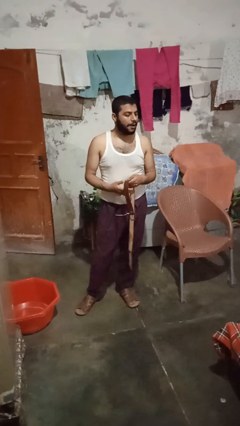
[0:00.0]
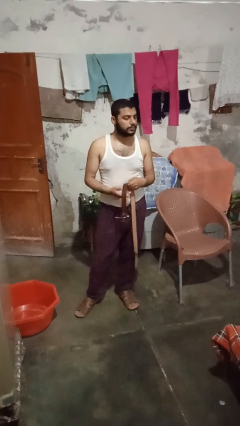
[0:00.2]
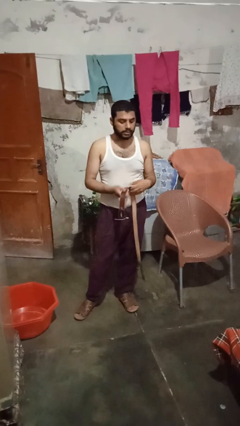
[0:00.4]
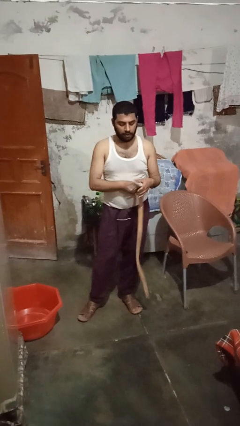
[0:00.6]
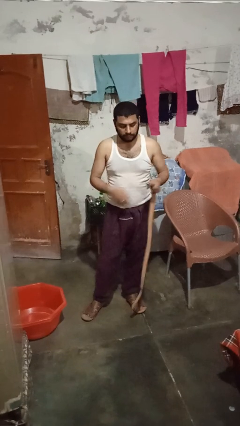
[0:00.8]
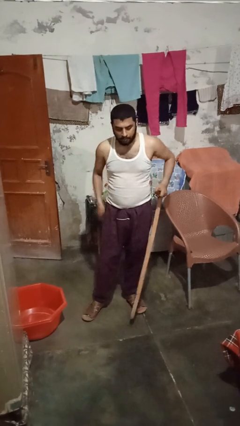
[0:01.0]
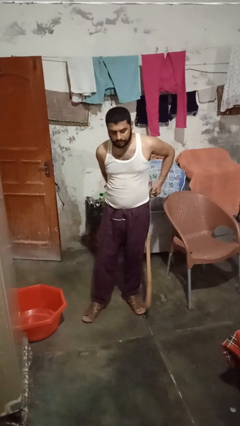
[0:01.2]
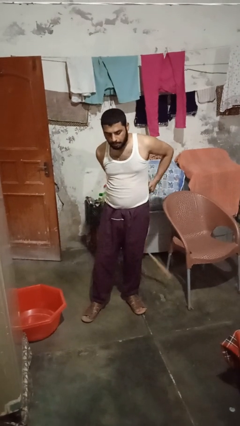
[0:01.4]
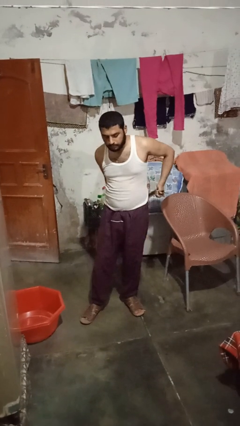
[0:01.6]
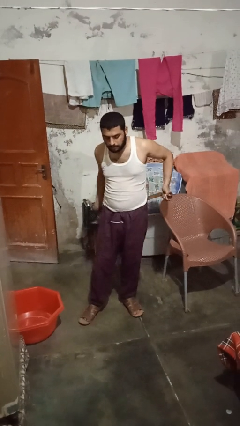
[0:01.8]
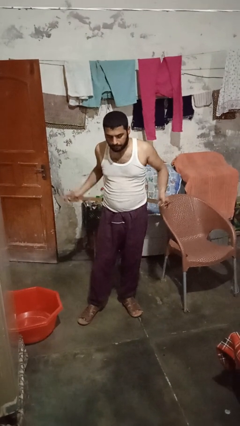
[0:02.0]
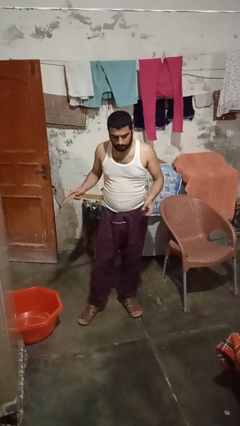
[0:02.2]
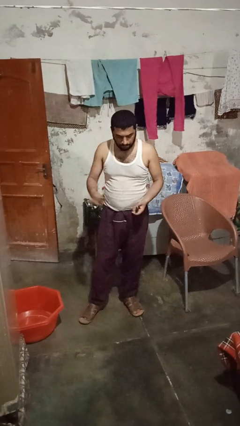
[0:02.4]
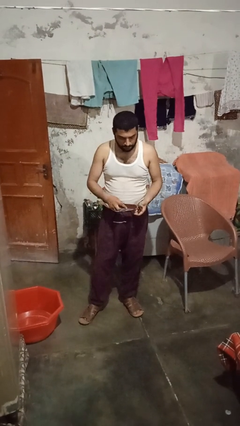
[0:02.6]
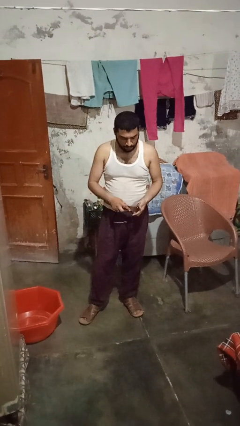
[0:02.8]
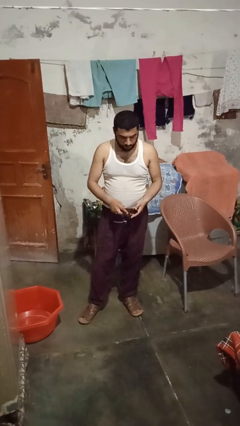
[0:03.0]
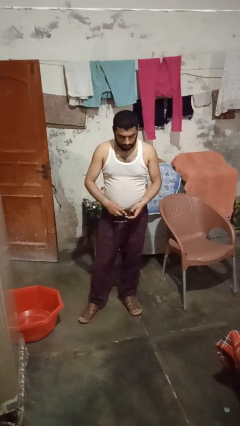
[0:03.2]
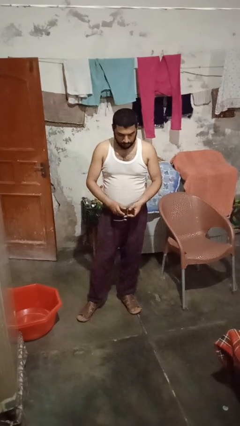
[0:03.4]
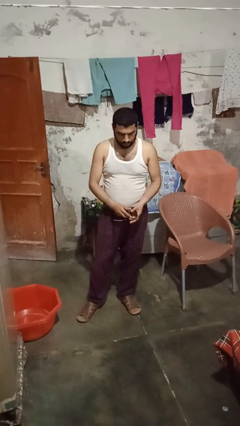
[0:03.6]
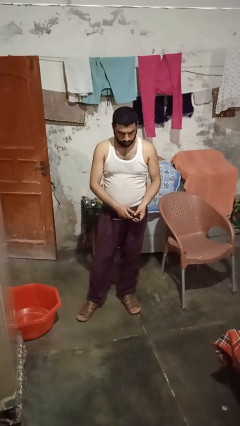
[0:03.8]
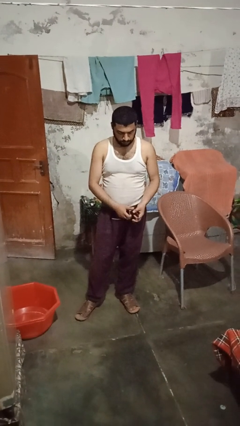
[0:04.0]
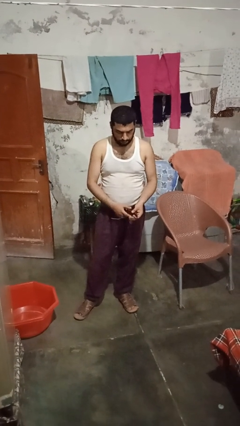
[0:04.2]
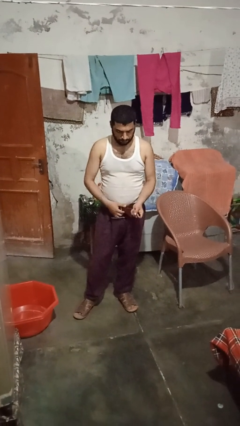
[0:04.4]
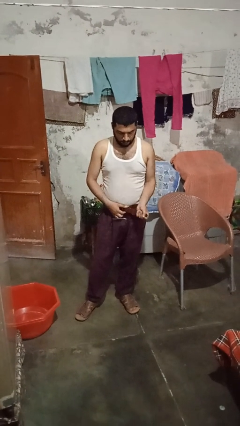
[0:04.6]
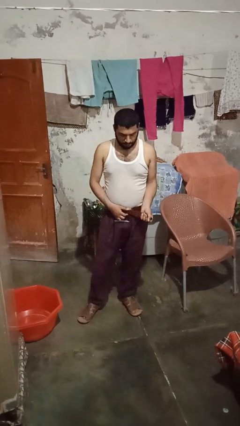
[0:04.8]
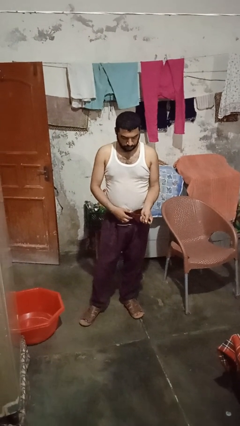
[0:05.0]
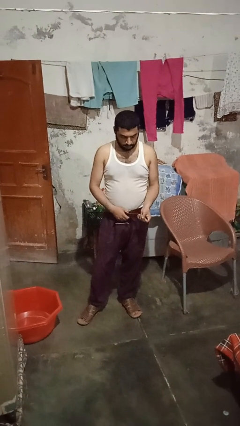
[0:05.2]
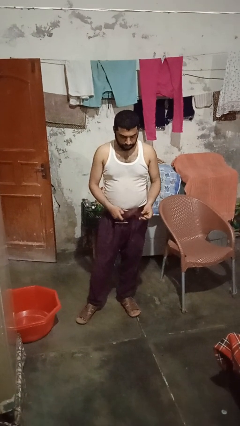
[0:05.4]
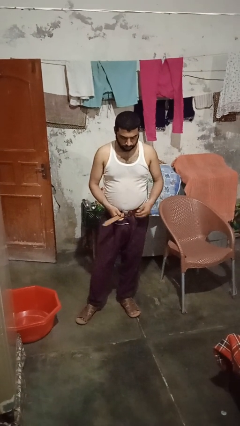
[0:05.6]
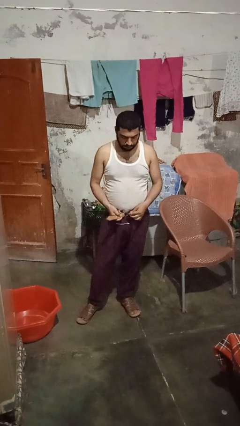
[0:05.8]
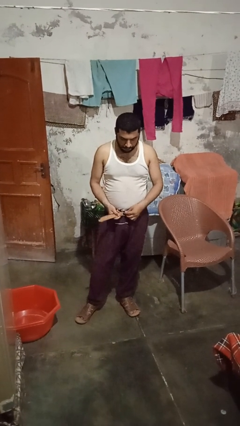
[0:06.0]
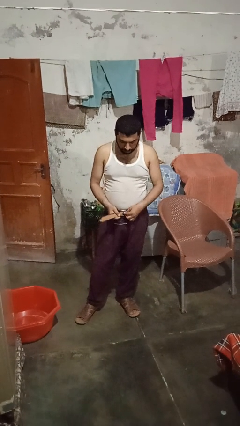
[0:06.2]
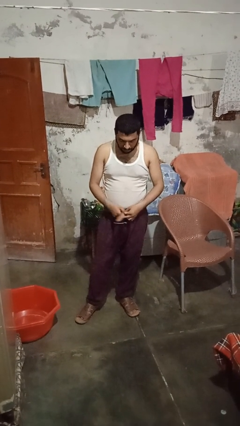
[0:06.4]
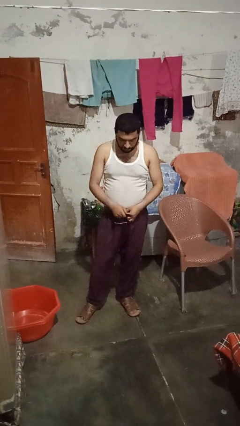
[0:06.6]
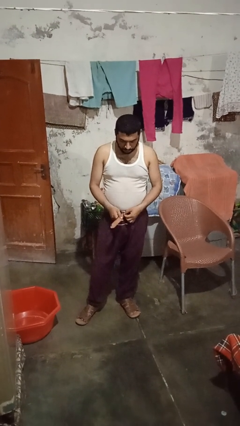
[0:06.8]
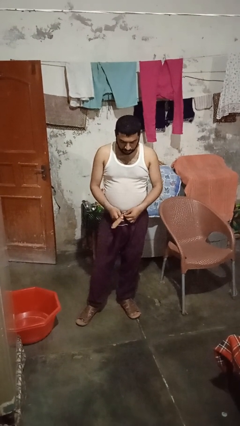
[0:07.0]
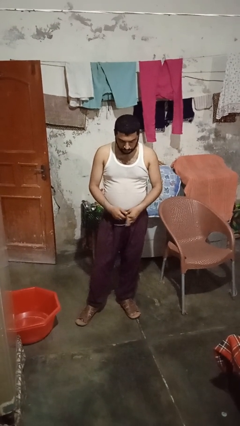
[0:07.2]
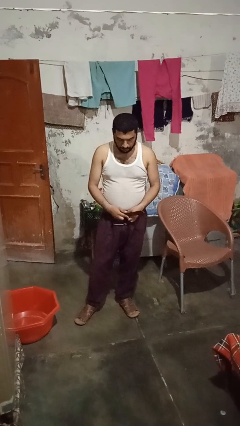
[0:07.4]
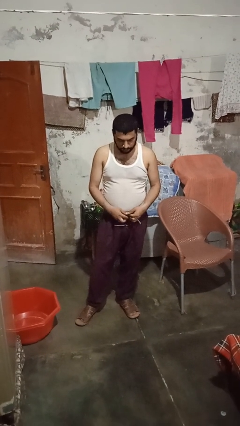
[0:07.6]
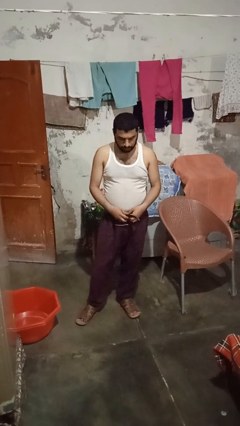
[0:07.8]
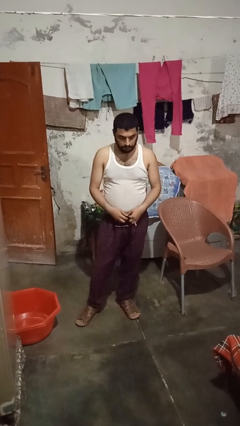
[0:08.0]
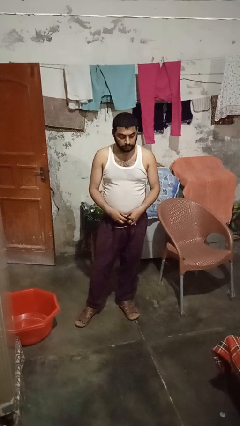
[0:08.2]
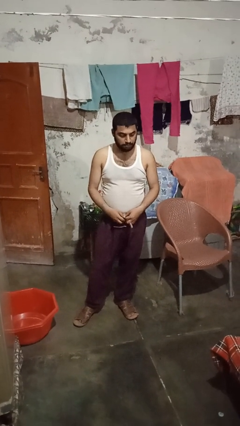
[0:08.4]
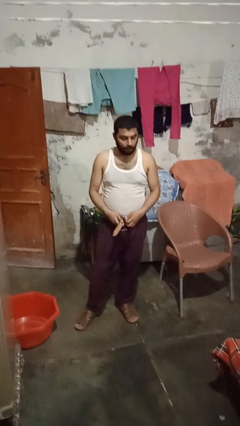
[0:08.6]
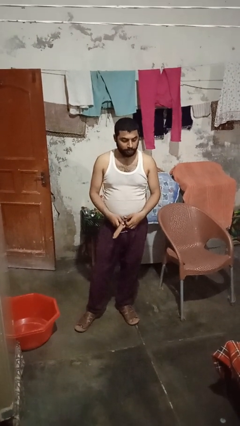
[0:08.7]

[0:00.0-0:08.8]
person puts on belt

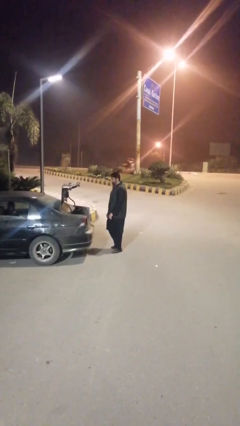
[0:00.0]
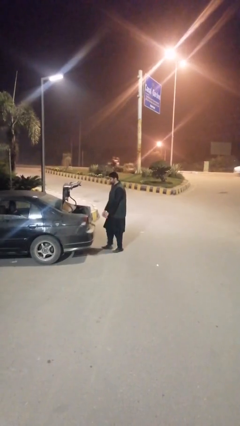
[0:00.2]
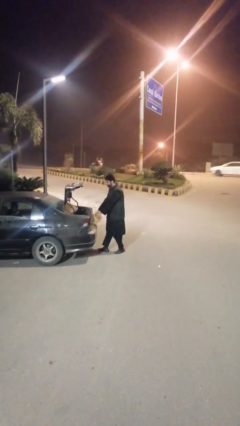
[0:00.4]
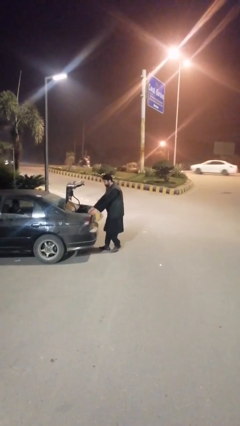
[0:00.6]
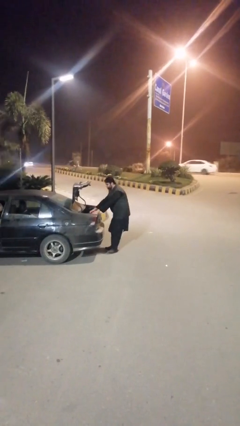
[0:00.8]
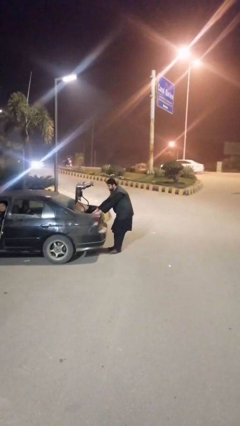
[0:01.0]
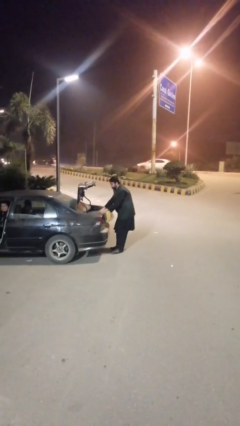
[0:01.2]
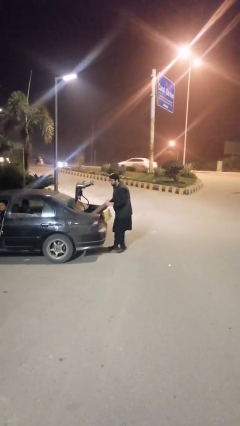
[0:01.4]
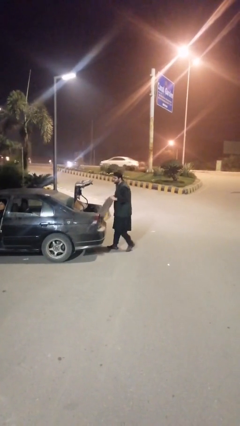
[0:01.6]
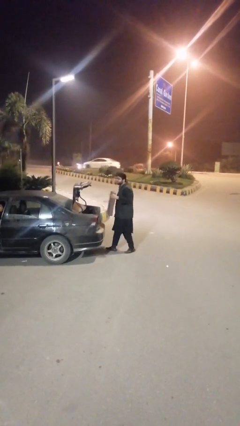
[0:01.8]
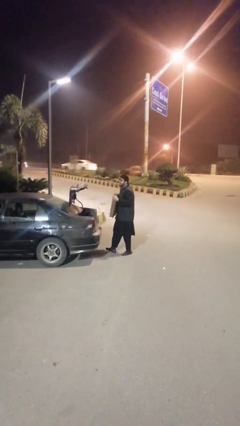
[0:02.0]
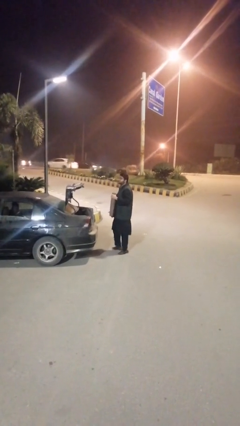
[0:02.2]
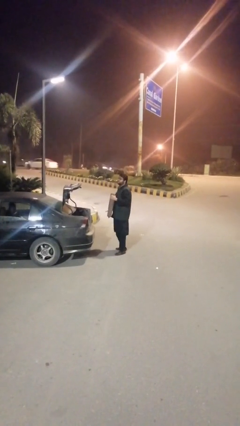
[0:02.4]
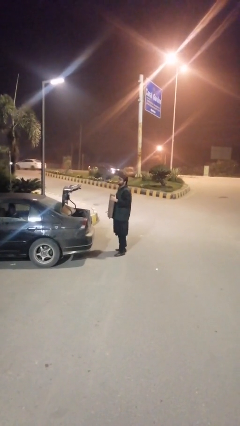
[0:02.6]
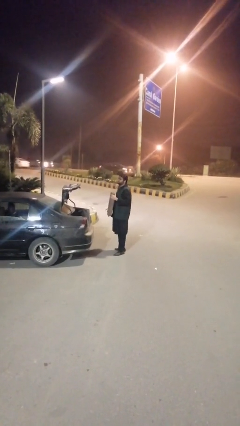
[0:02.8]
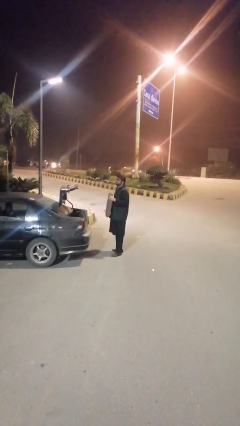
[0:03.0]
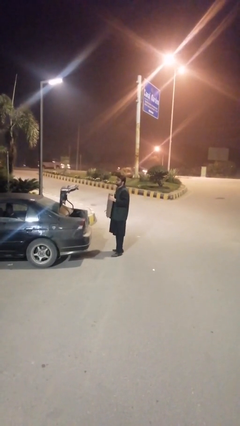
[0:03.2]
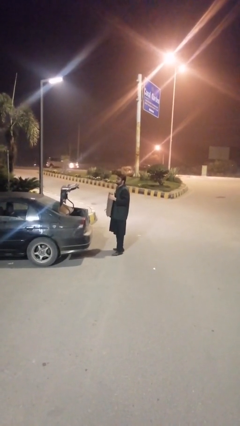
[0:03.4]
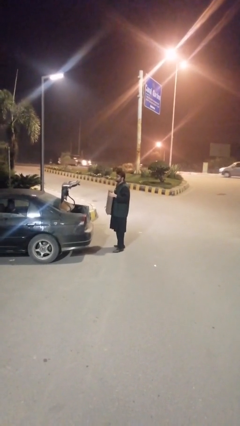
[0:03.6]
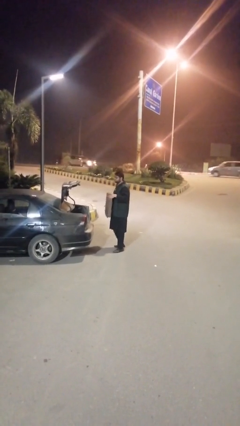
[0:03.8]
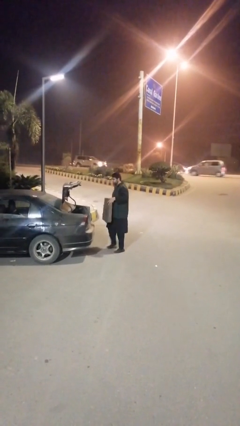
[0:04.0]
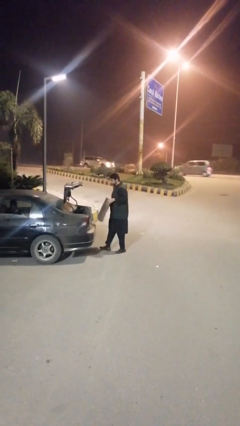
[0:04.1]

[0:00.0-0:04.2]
person unloads car

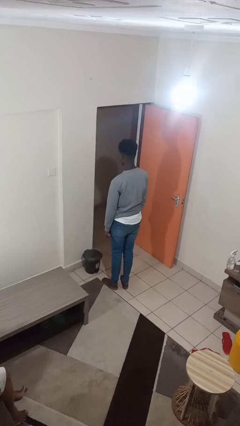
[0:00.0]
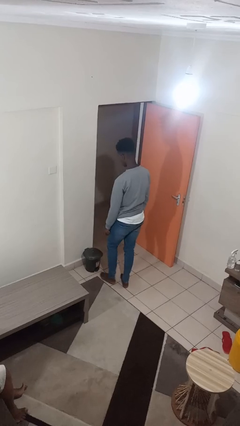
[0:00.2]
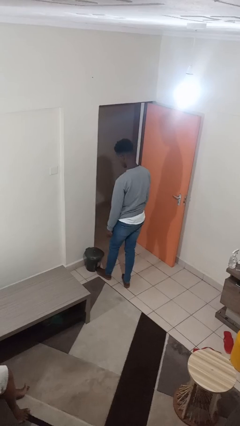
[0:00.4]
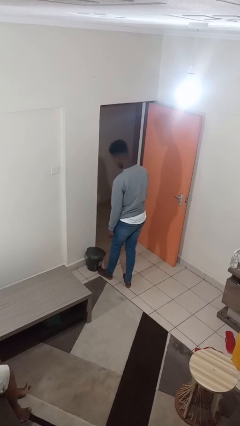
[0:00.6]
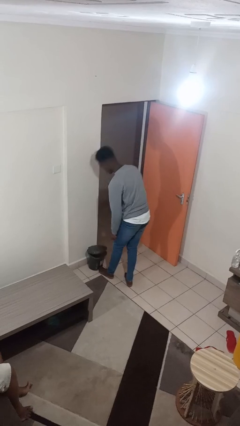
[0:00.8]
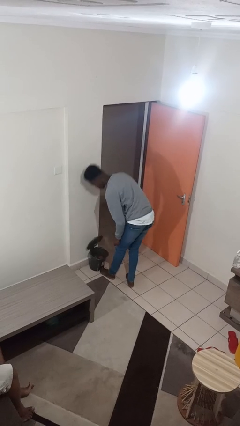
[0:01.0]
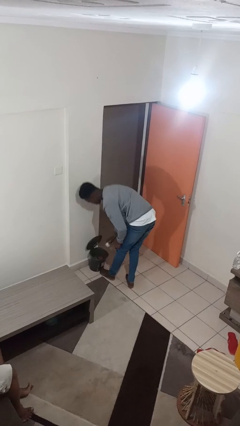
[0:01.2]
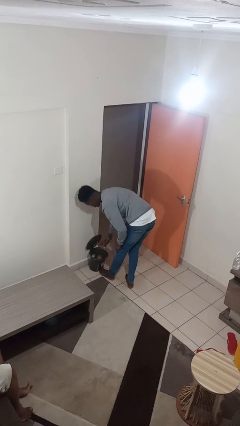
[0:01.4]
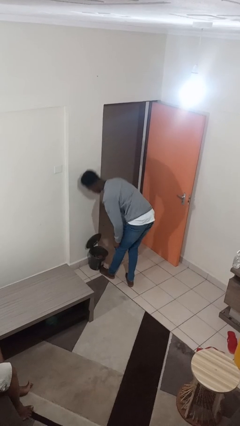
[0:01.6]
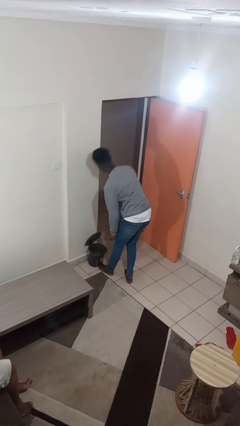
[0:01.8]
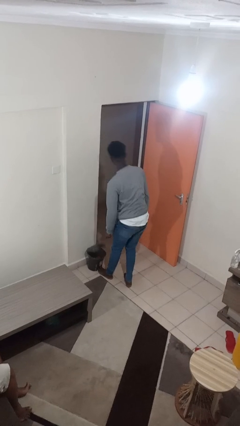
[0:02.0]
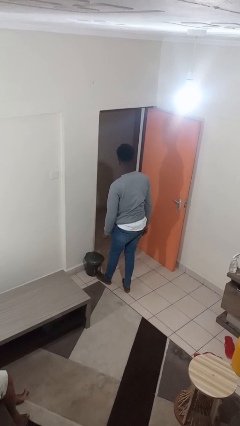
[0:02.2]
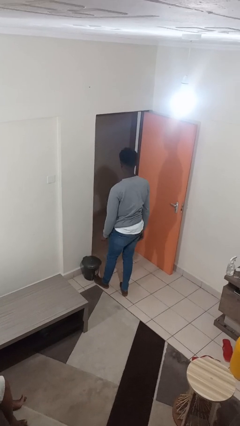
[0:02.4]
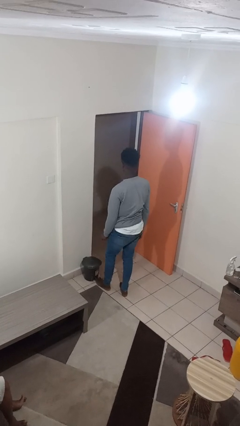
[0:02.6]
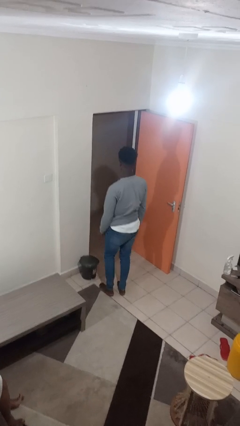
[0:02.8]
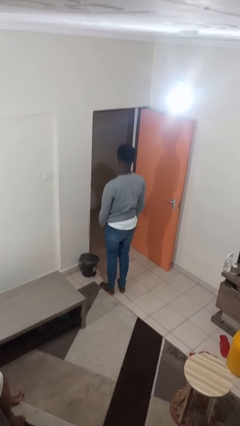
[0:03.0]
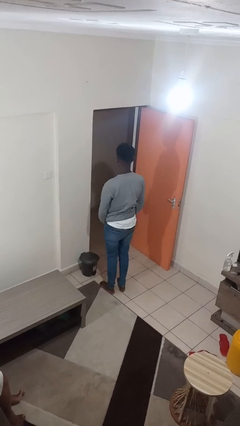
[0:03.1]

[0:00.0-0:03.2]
person discards trash

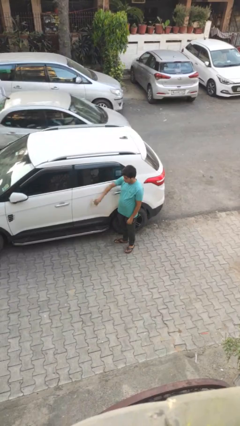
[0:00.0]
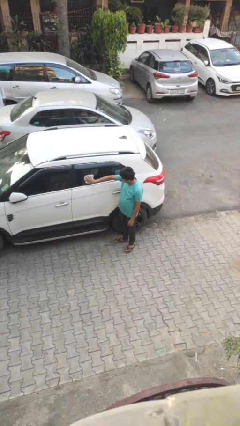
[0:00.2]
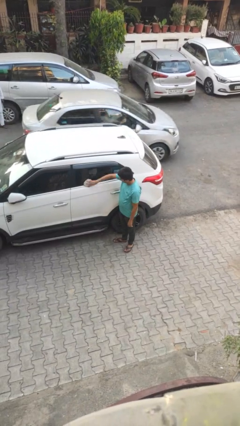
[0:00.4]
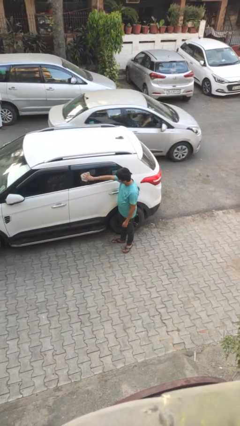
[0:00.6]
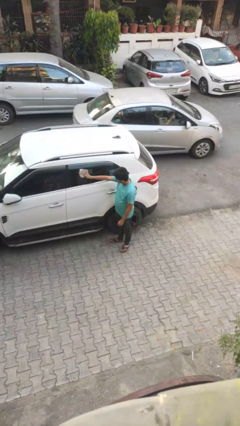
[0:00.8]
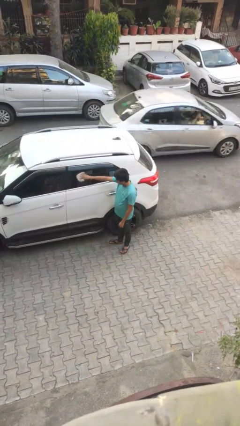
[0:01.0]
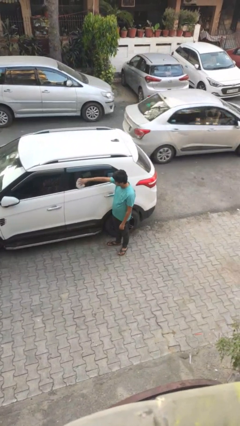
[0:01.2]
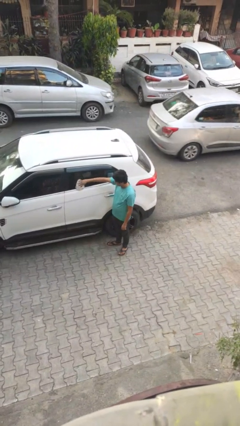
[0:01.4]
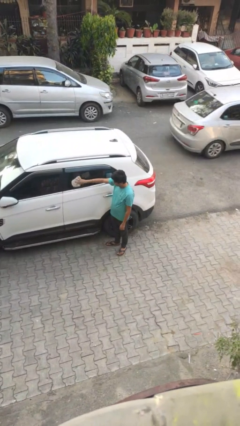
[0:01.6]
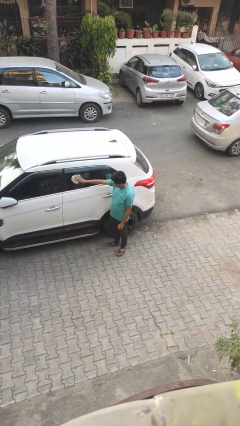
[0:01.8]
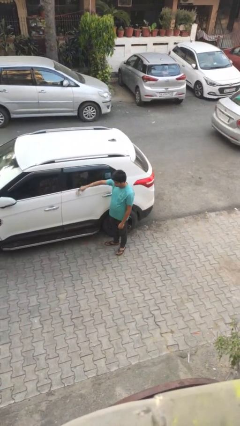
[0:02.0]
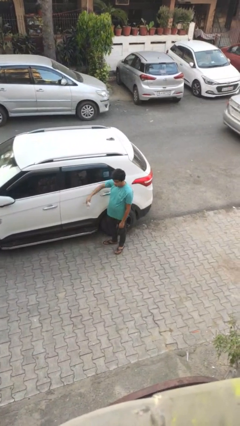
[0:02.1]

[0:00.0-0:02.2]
person polishes car with rag
